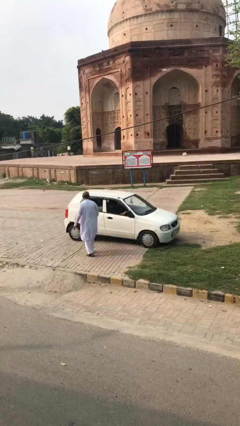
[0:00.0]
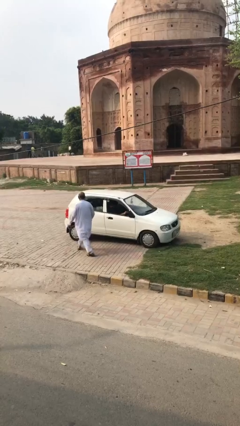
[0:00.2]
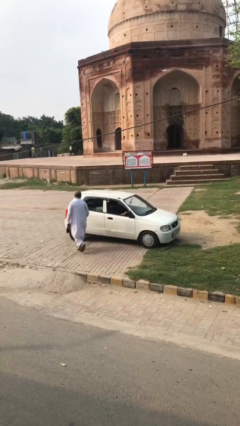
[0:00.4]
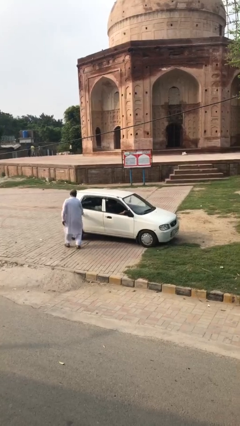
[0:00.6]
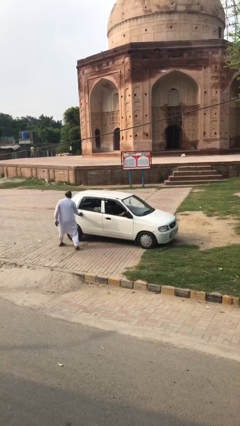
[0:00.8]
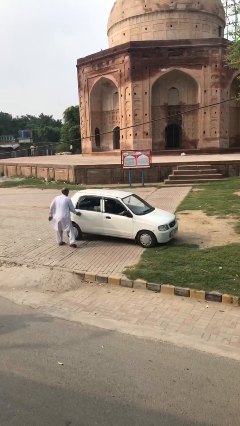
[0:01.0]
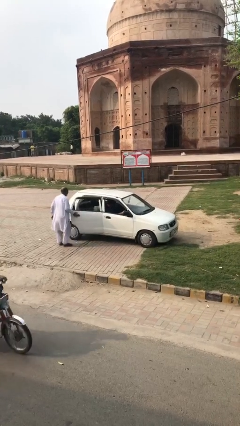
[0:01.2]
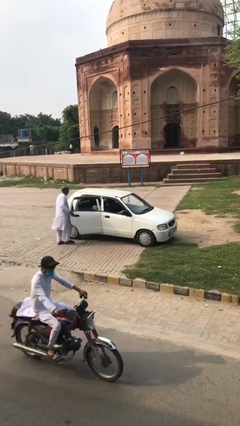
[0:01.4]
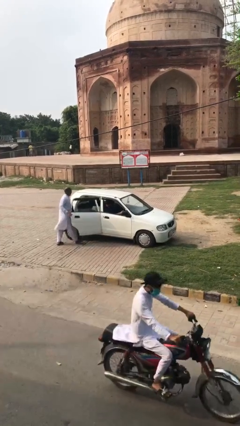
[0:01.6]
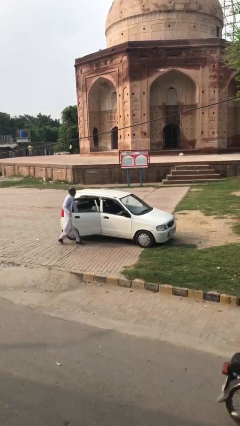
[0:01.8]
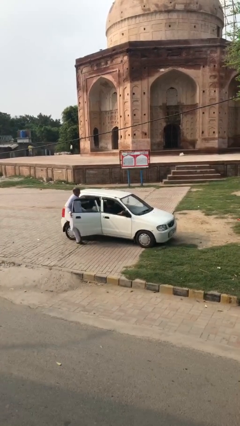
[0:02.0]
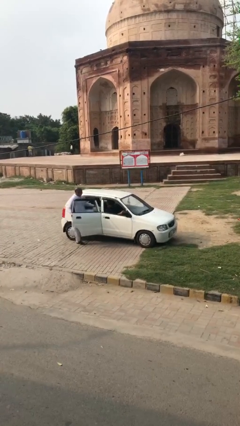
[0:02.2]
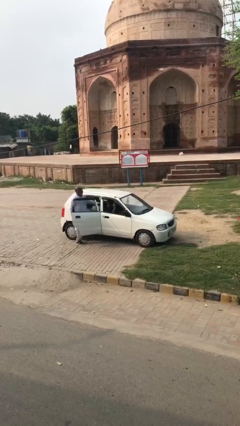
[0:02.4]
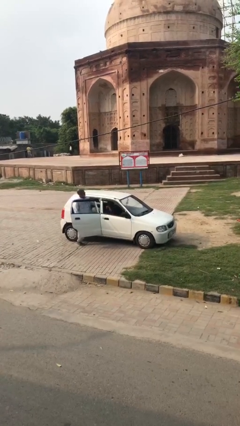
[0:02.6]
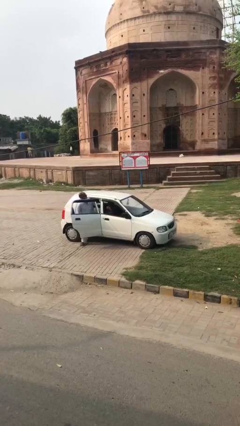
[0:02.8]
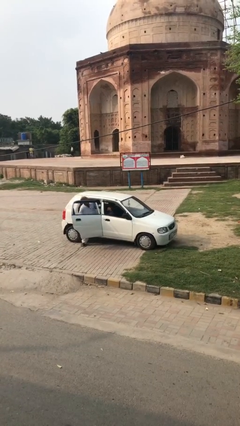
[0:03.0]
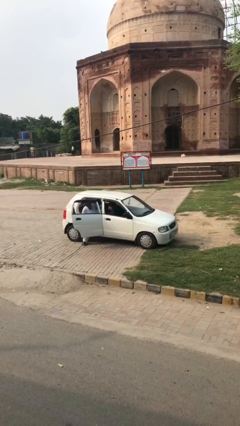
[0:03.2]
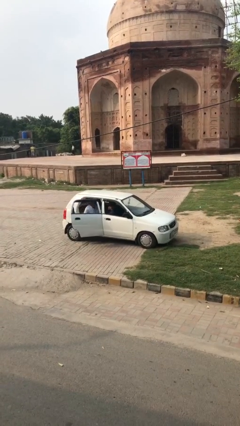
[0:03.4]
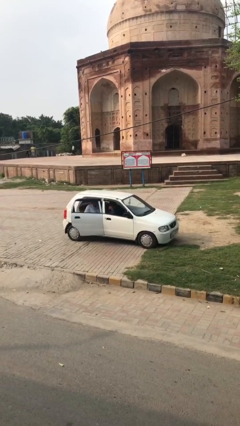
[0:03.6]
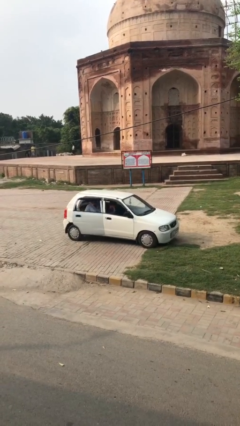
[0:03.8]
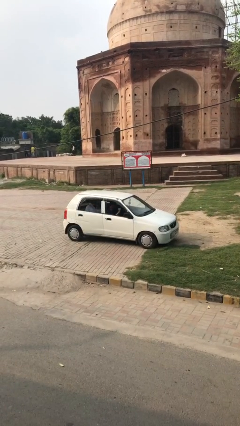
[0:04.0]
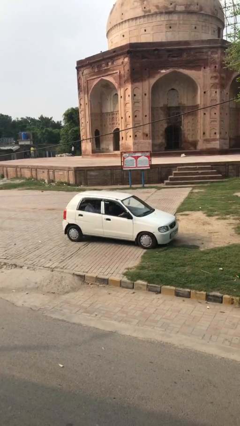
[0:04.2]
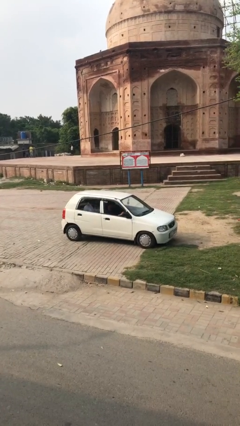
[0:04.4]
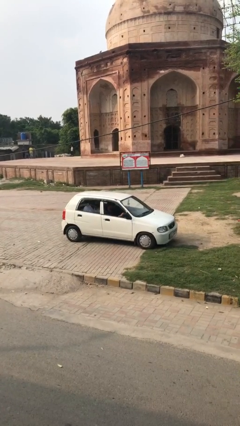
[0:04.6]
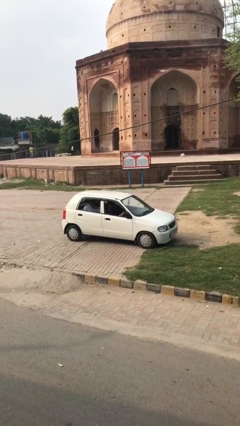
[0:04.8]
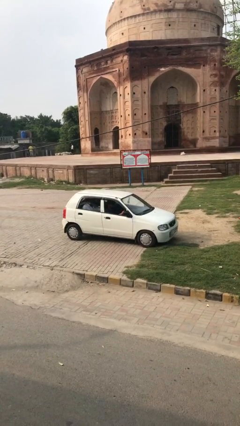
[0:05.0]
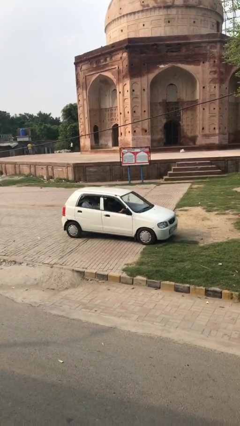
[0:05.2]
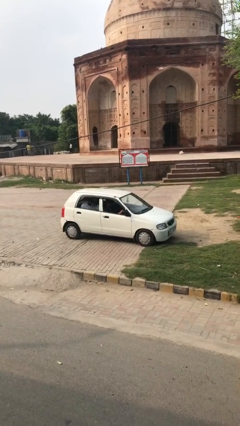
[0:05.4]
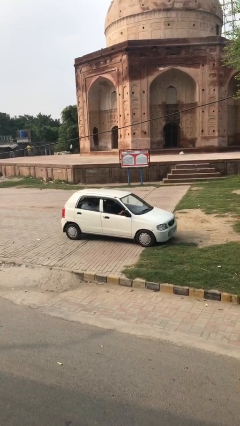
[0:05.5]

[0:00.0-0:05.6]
car picks up person

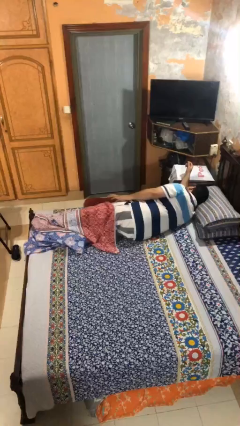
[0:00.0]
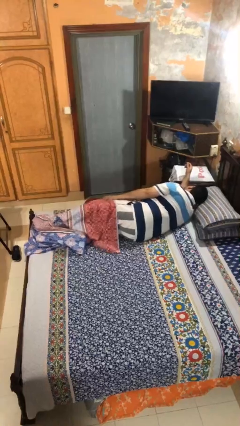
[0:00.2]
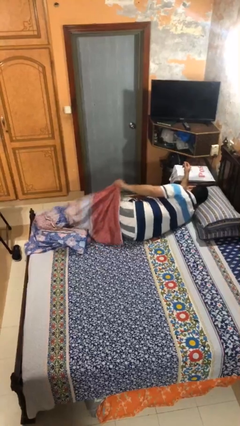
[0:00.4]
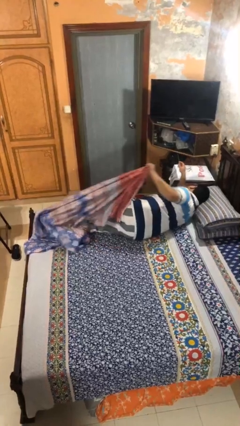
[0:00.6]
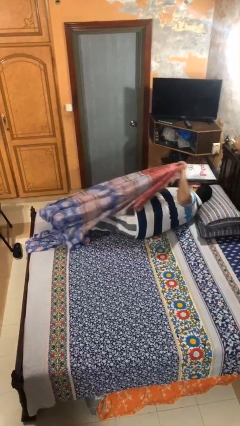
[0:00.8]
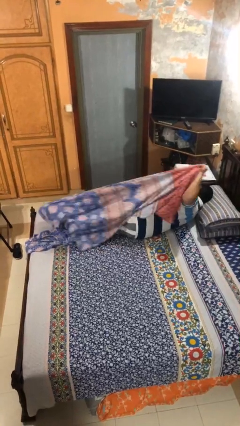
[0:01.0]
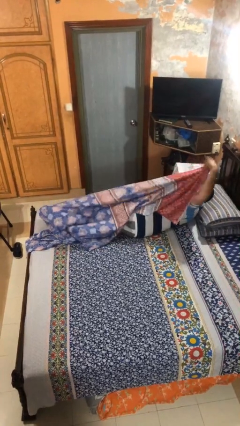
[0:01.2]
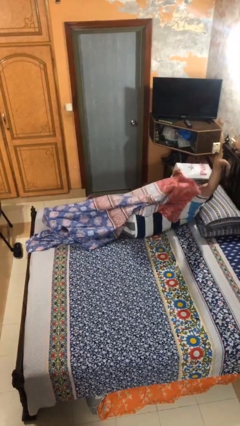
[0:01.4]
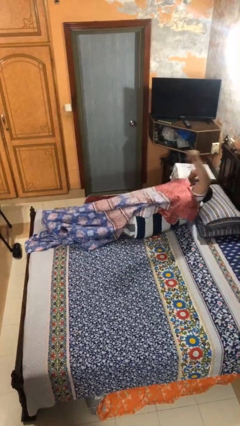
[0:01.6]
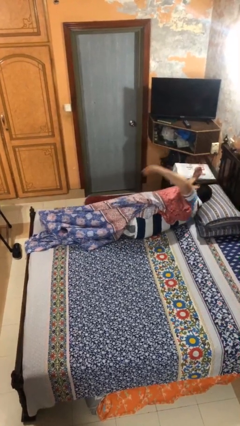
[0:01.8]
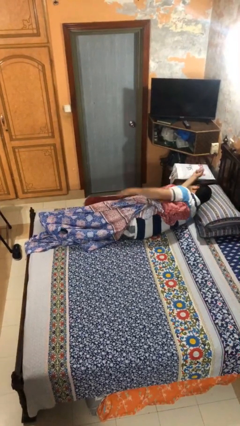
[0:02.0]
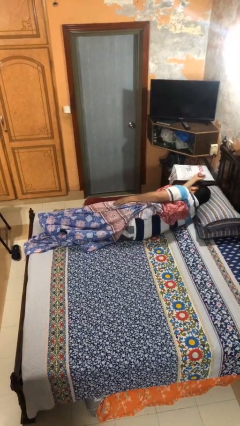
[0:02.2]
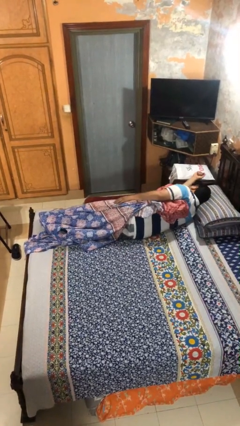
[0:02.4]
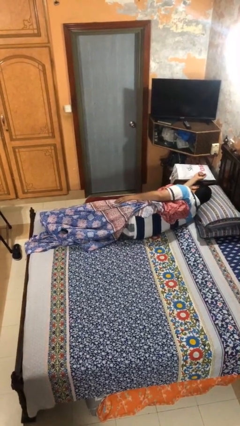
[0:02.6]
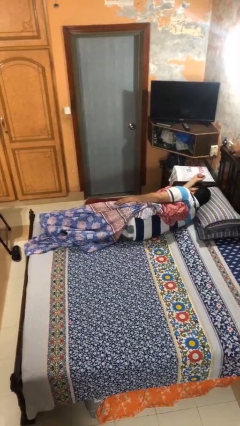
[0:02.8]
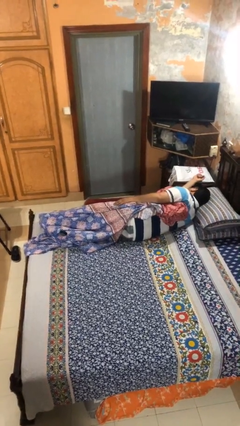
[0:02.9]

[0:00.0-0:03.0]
person covers with bedsheets

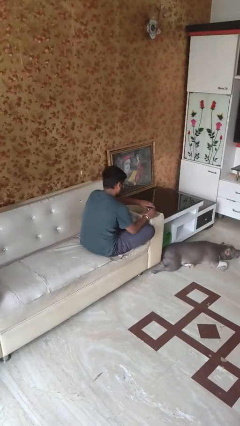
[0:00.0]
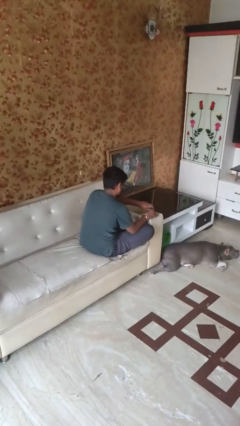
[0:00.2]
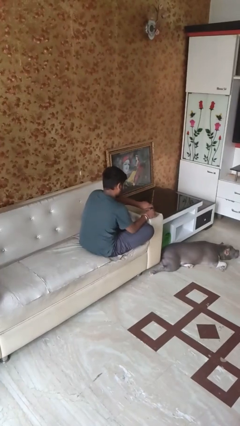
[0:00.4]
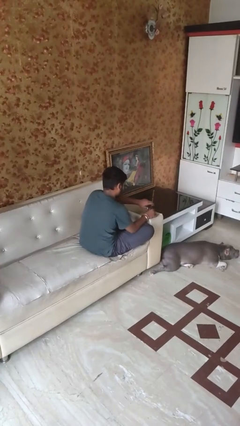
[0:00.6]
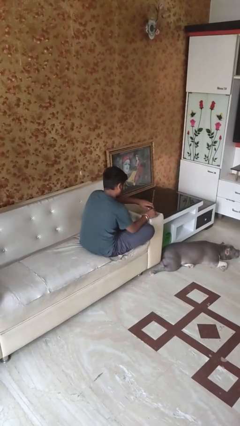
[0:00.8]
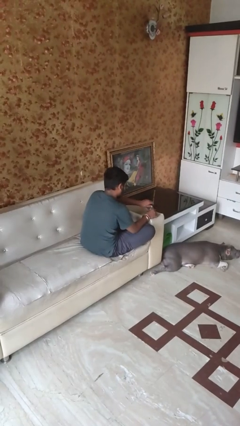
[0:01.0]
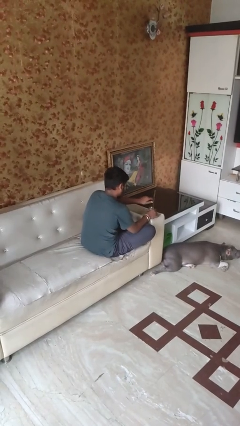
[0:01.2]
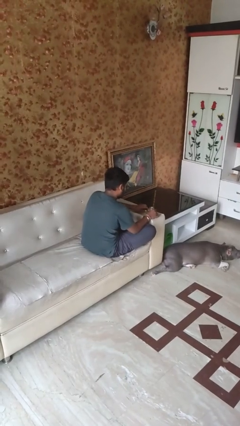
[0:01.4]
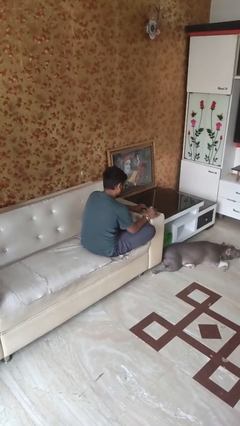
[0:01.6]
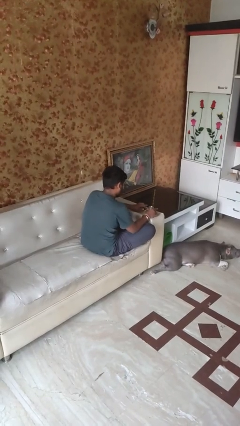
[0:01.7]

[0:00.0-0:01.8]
person opens jar

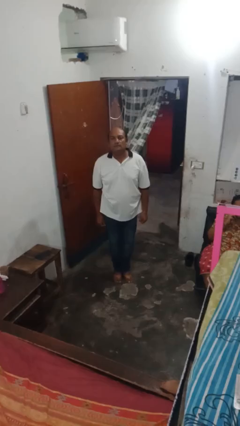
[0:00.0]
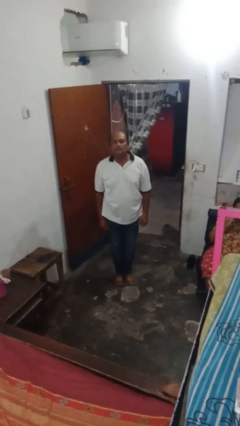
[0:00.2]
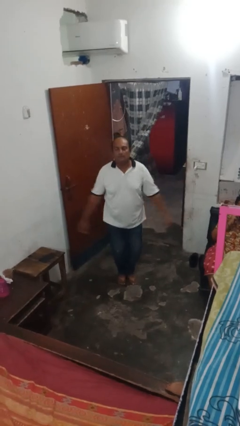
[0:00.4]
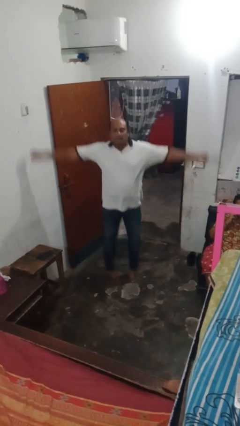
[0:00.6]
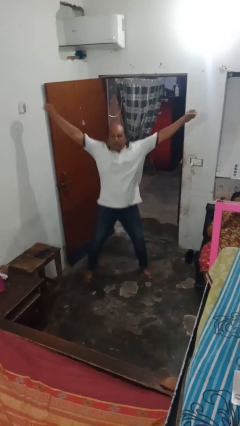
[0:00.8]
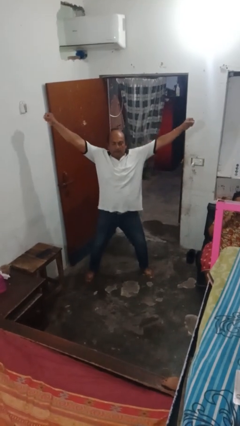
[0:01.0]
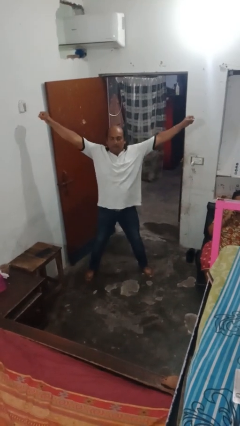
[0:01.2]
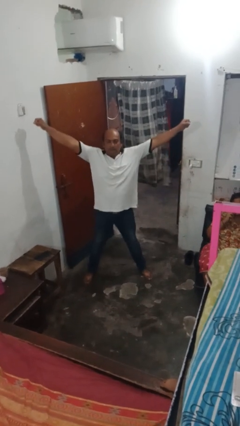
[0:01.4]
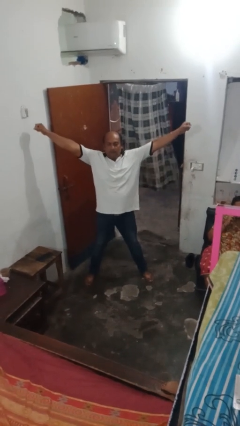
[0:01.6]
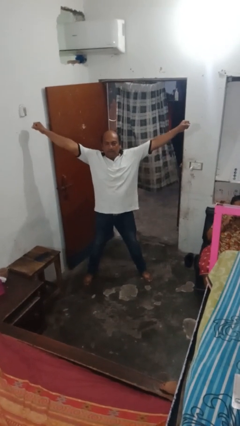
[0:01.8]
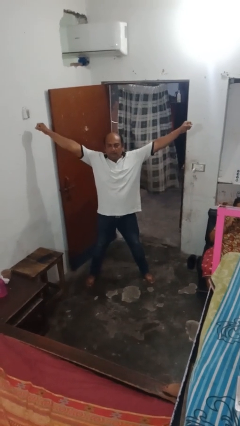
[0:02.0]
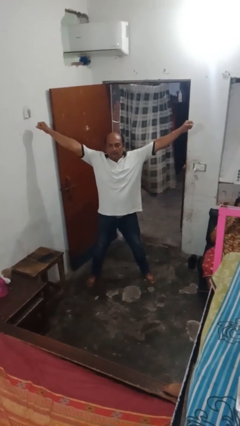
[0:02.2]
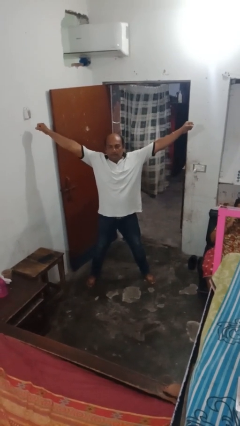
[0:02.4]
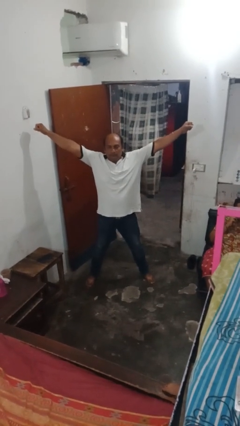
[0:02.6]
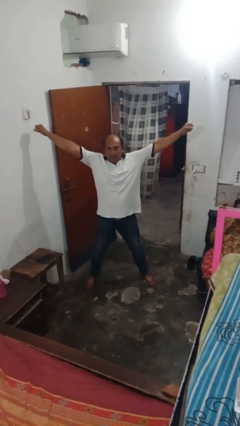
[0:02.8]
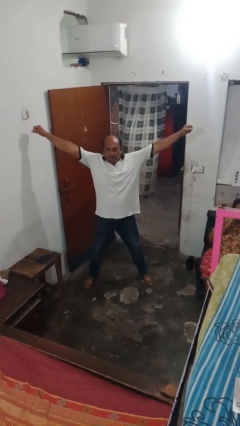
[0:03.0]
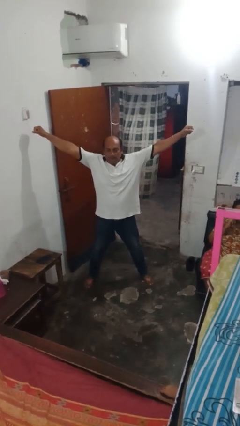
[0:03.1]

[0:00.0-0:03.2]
person exercises with jumping jacks

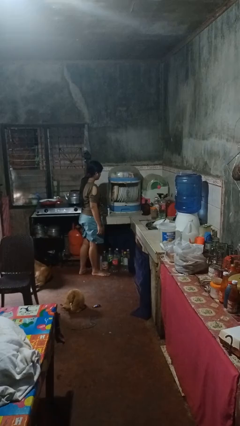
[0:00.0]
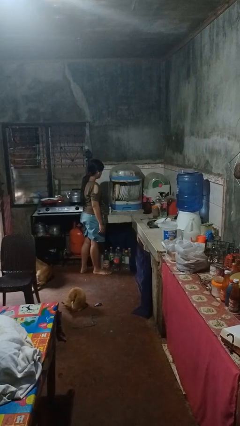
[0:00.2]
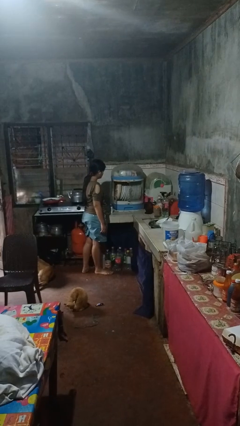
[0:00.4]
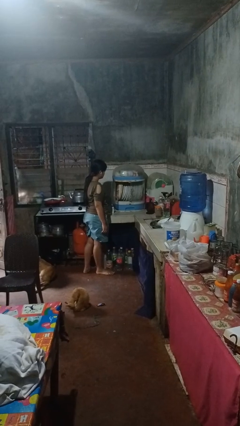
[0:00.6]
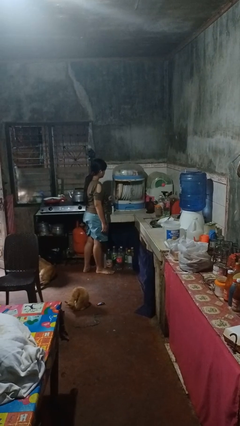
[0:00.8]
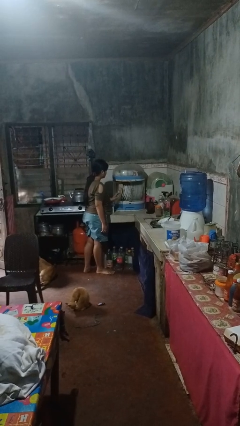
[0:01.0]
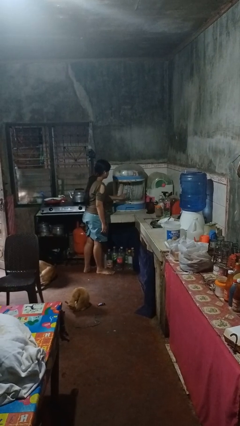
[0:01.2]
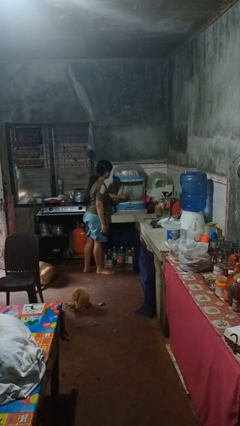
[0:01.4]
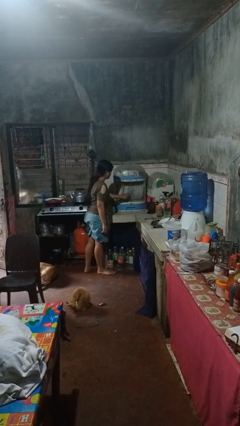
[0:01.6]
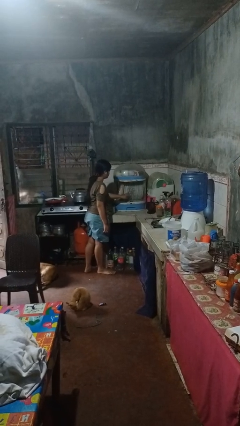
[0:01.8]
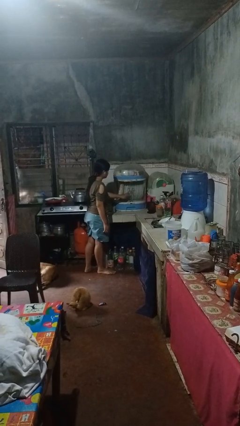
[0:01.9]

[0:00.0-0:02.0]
person closes kitchen drawer

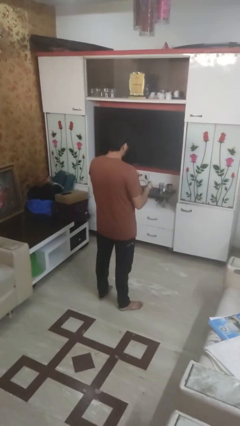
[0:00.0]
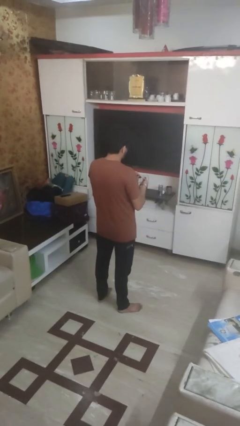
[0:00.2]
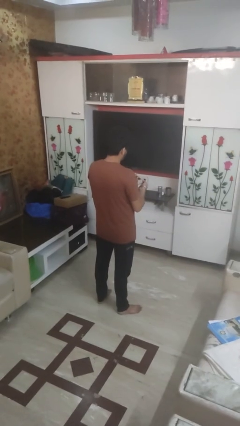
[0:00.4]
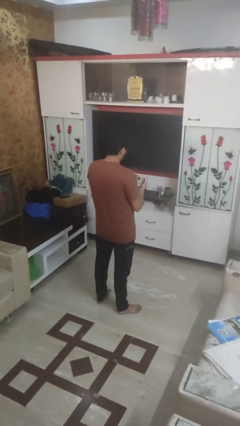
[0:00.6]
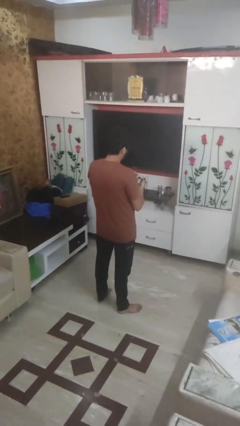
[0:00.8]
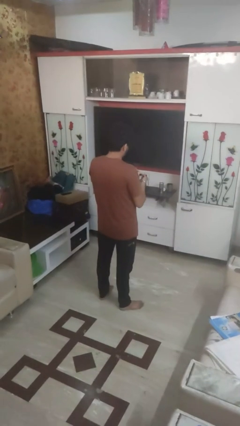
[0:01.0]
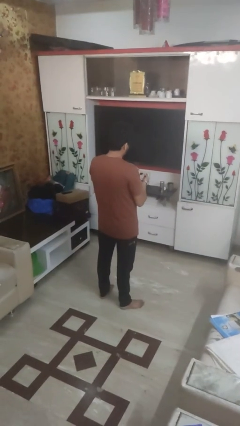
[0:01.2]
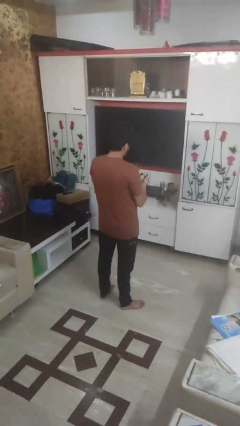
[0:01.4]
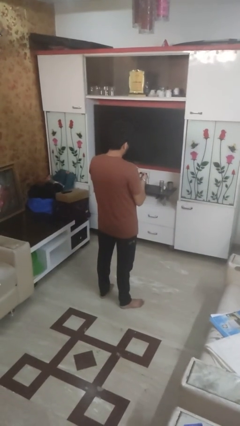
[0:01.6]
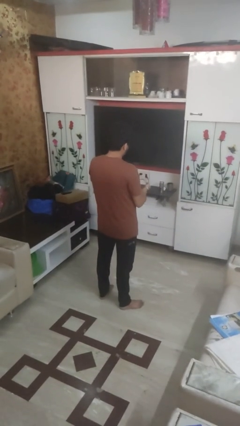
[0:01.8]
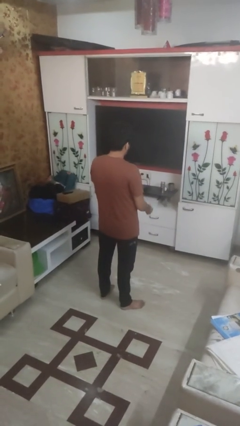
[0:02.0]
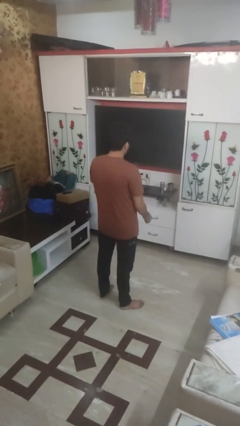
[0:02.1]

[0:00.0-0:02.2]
person files fingernails
